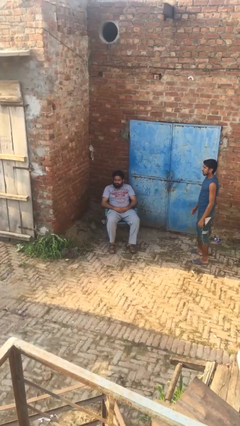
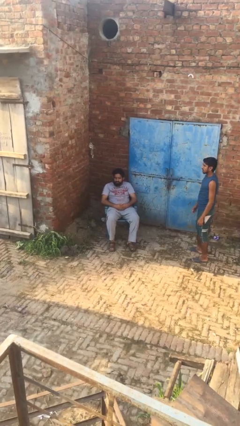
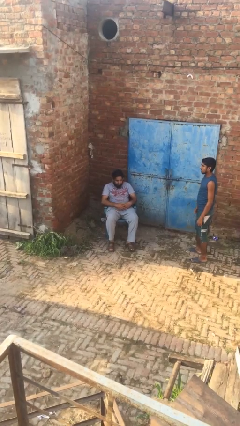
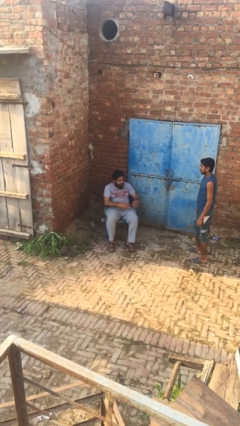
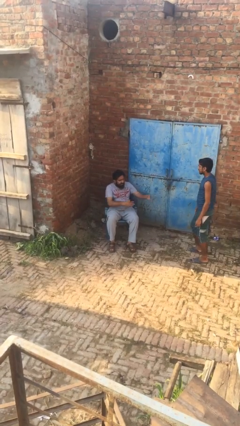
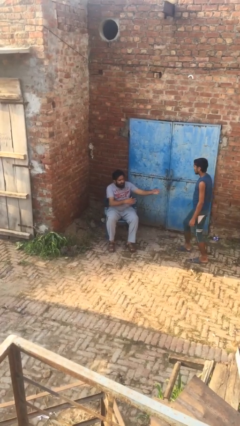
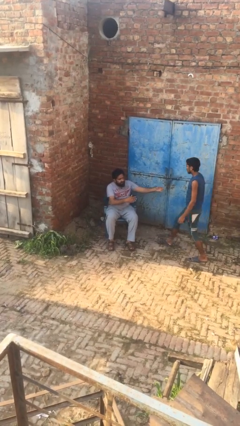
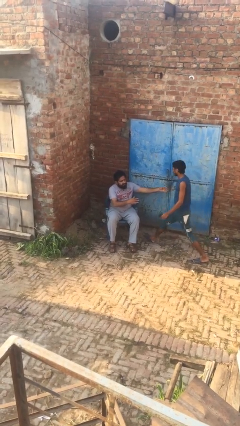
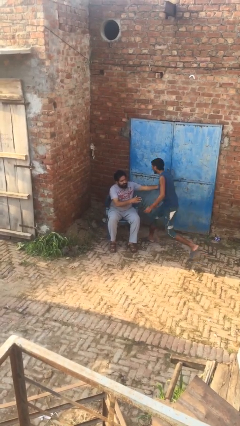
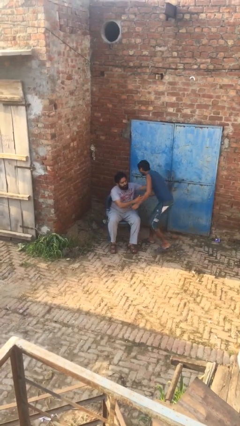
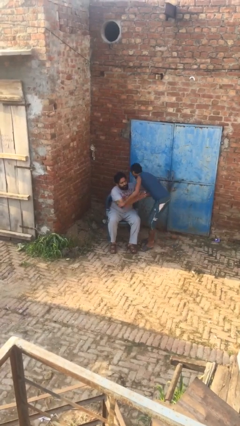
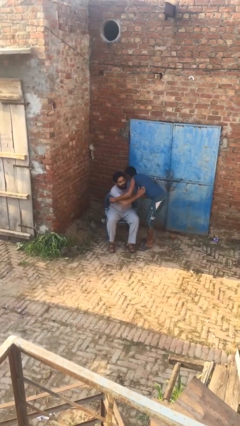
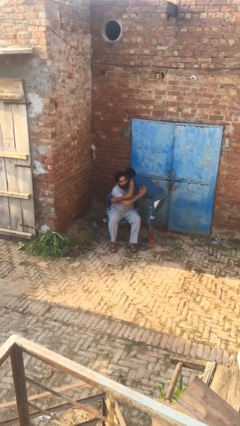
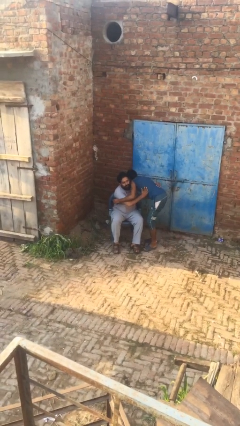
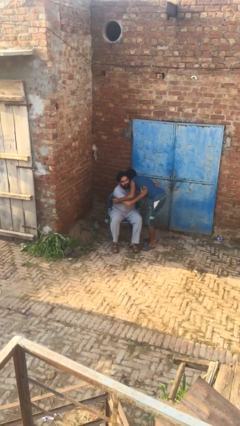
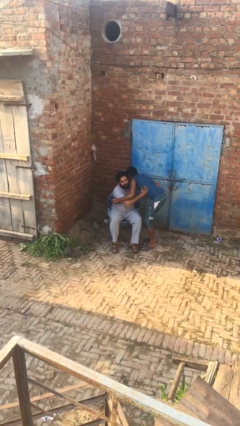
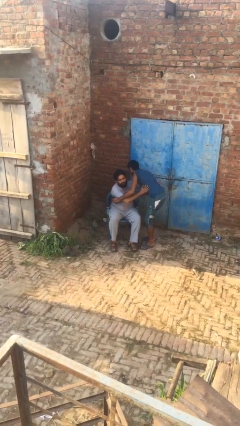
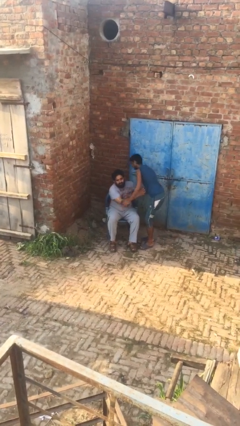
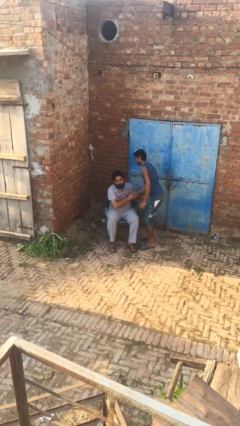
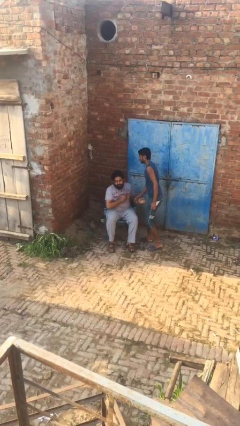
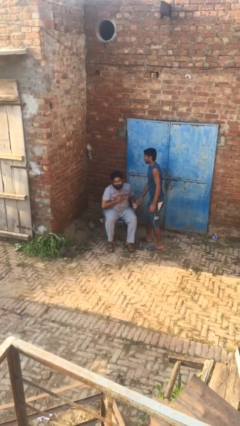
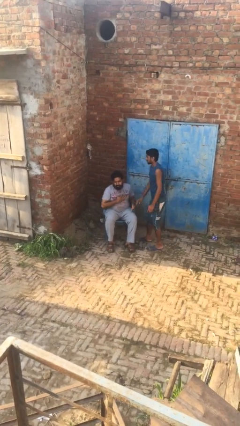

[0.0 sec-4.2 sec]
person embraces person

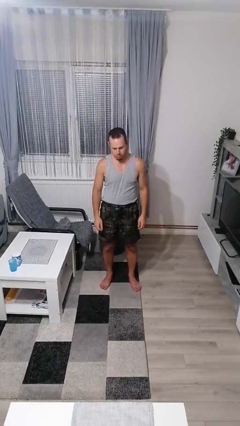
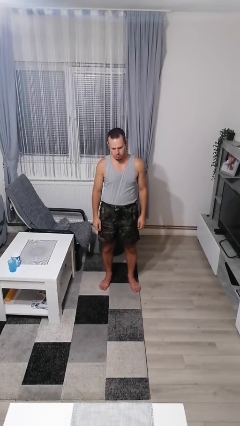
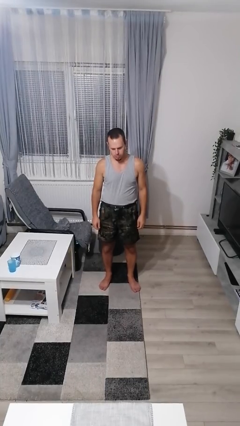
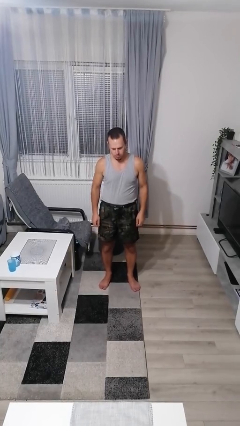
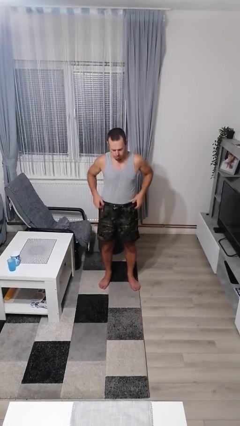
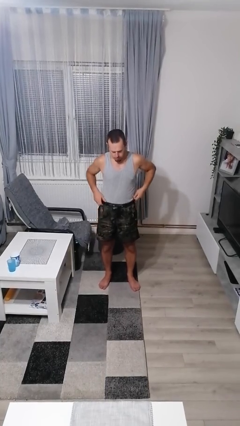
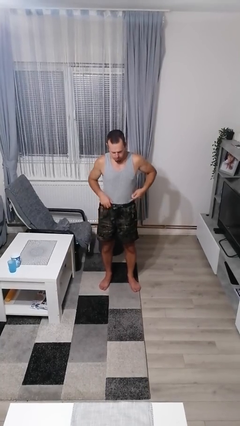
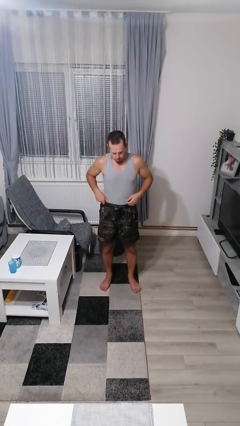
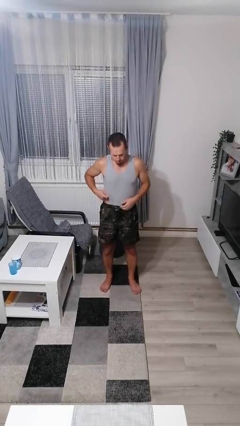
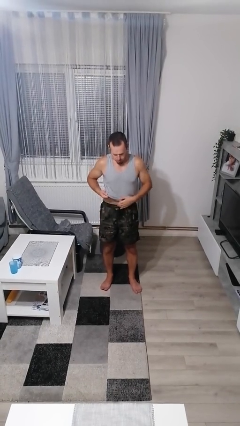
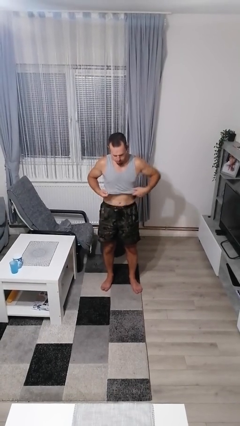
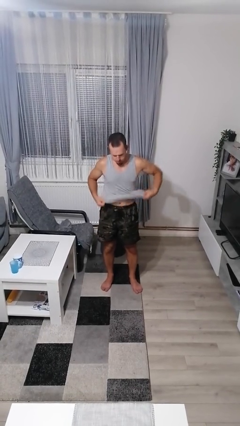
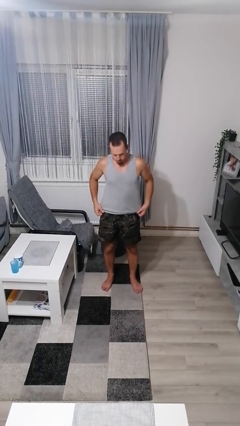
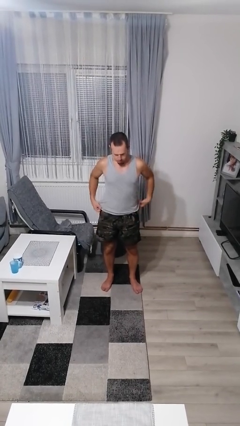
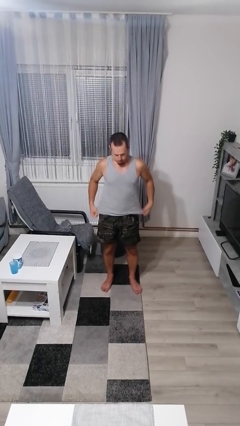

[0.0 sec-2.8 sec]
person untucks shirt

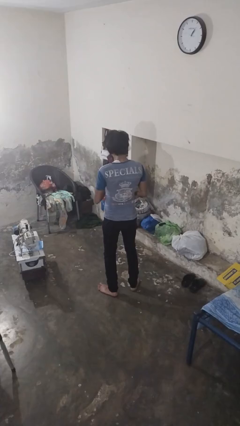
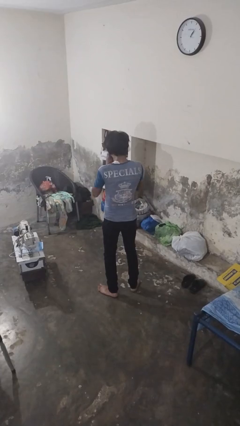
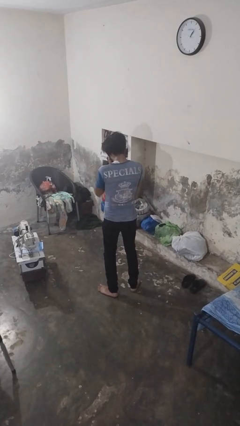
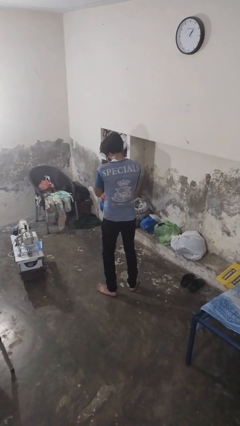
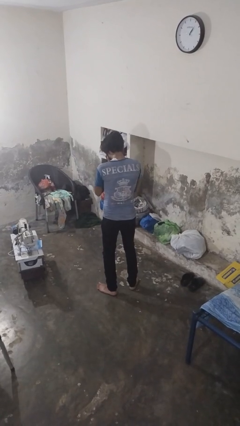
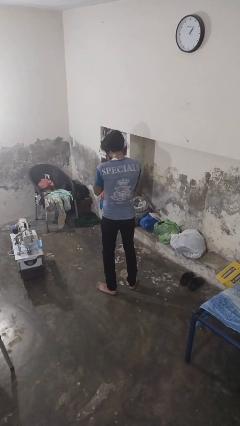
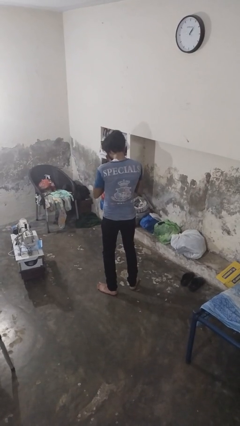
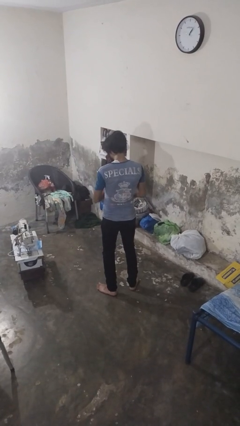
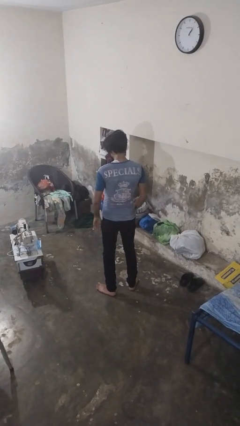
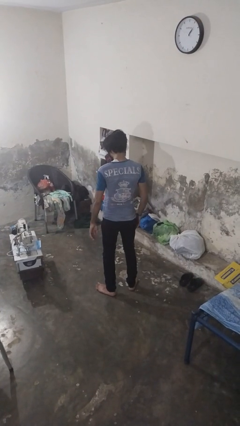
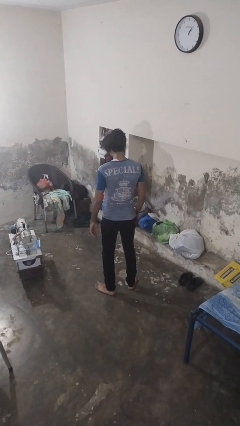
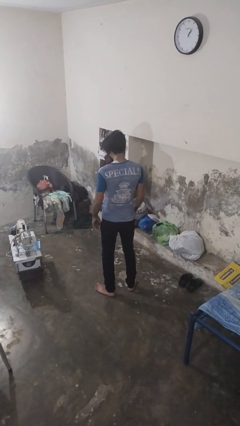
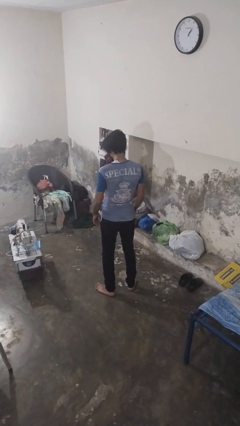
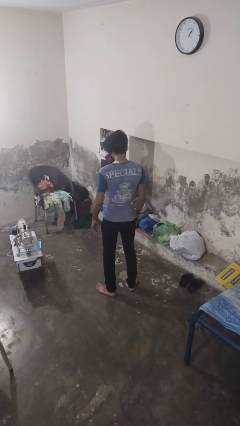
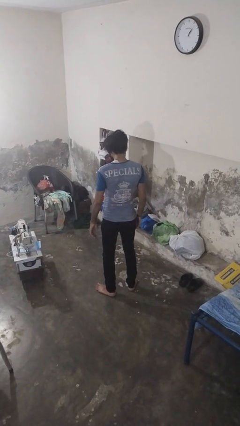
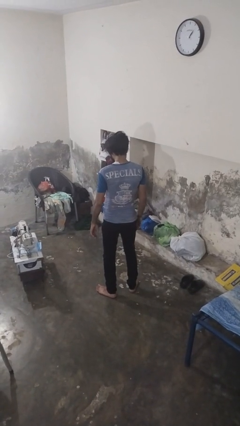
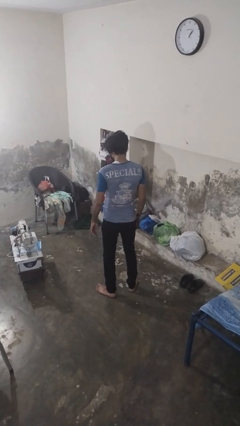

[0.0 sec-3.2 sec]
person sneezes into hand

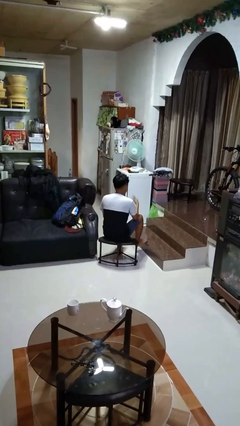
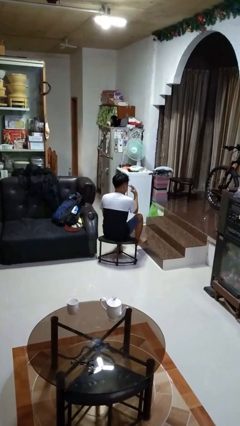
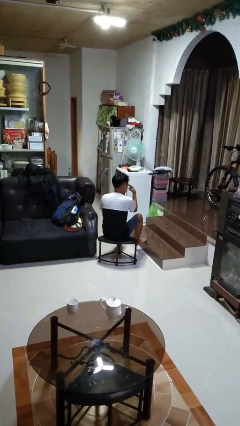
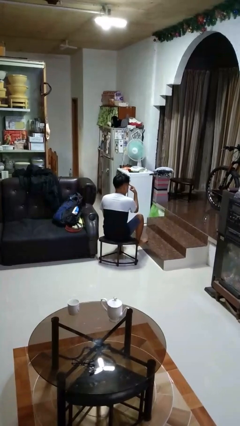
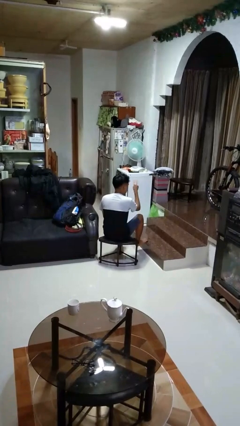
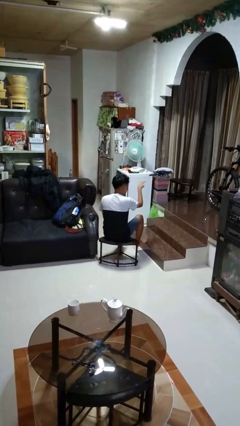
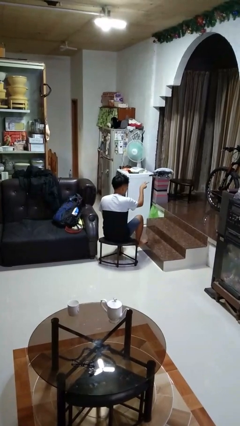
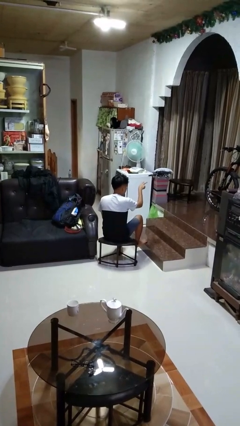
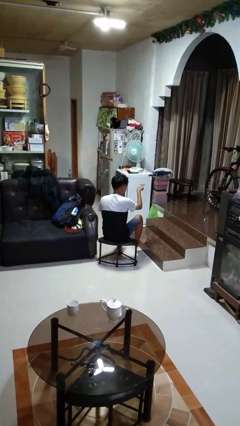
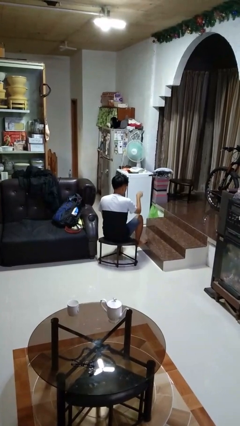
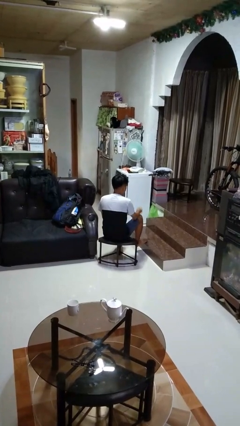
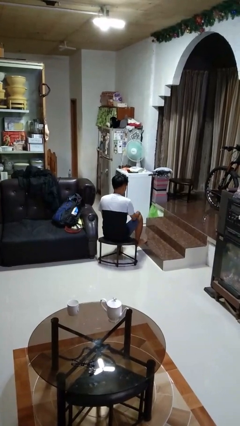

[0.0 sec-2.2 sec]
person gestures watch closely

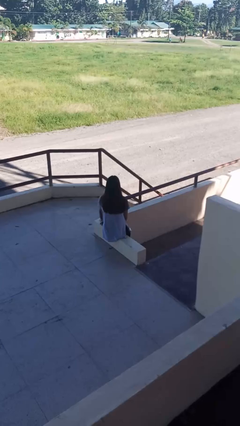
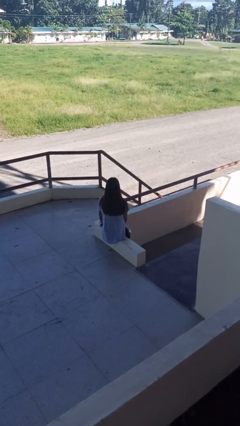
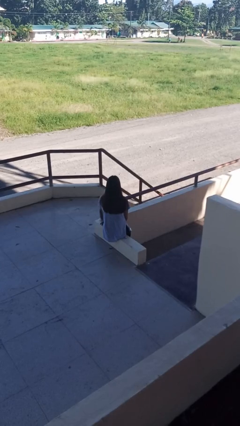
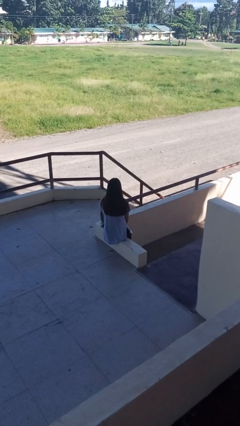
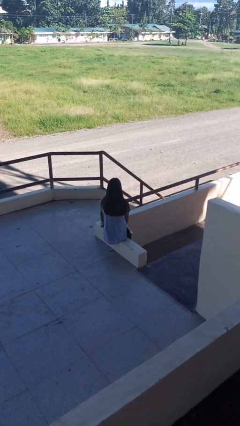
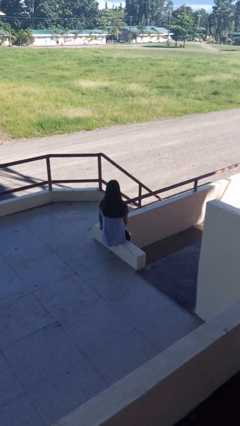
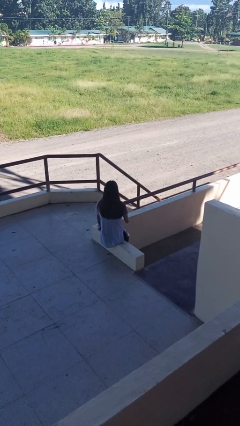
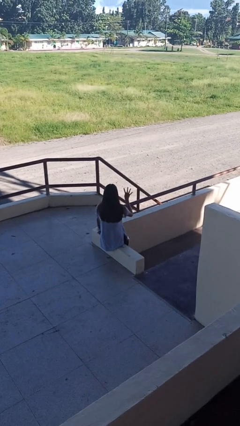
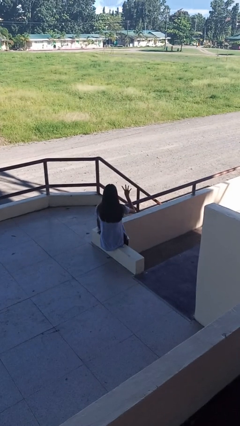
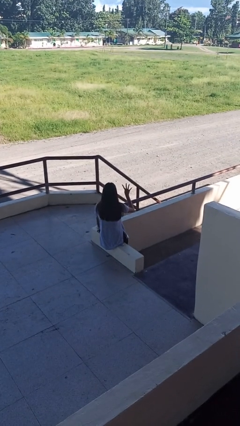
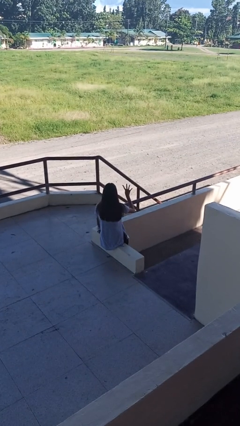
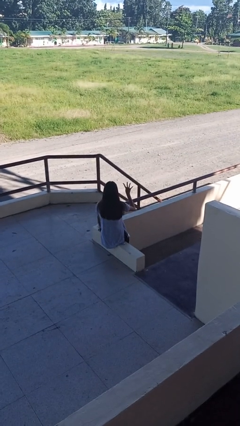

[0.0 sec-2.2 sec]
person gestures number four

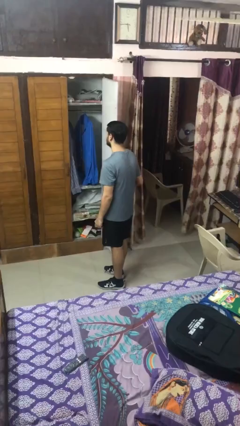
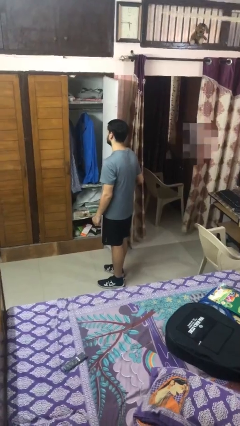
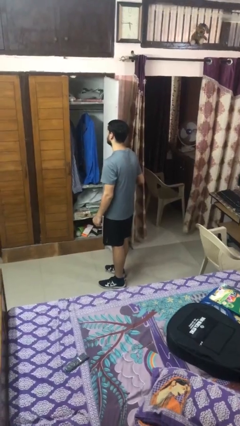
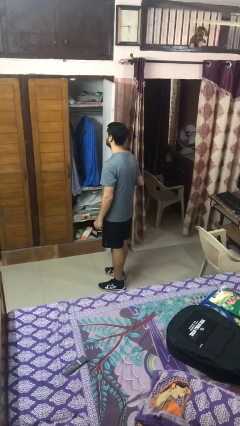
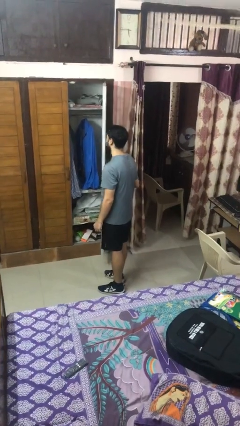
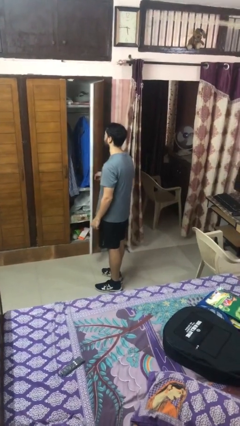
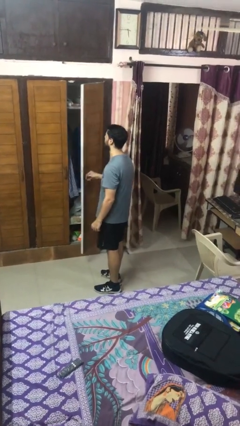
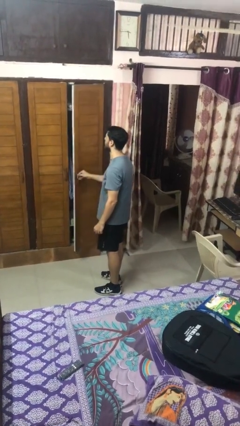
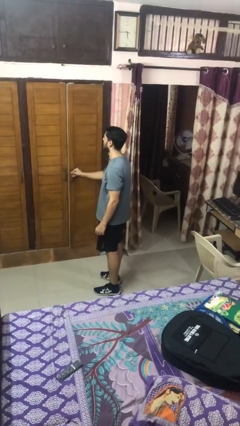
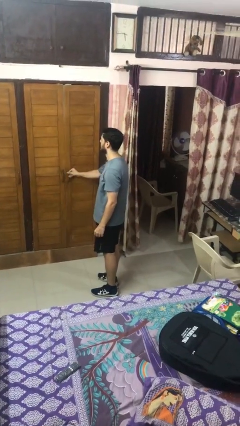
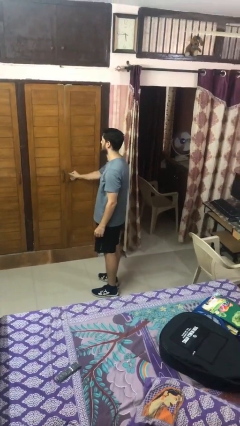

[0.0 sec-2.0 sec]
person closes closet door

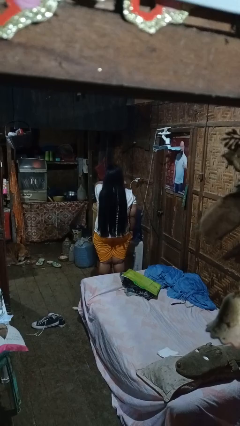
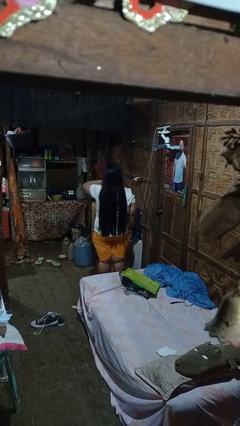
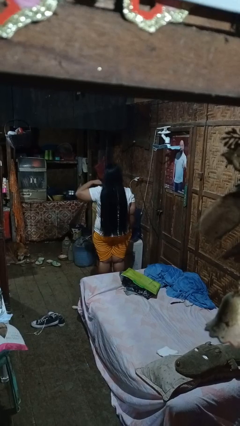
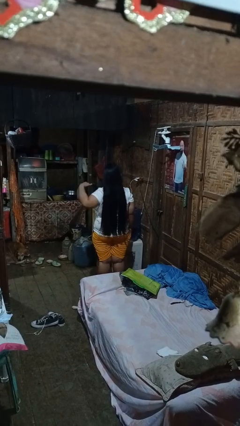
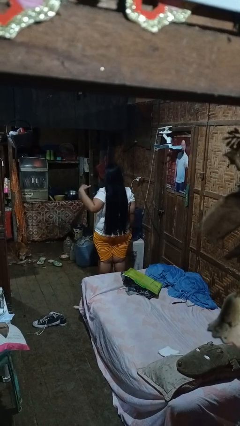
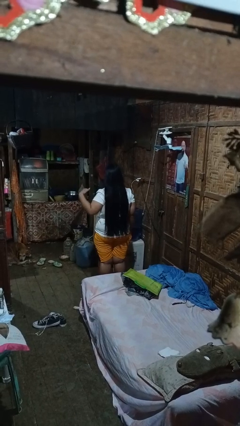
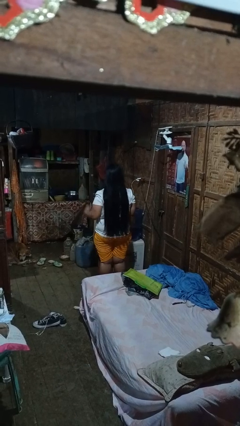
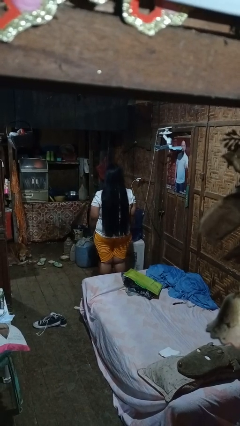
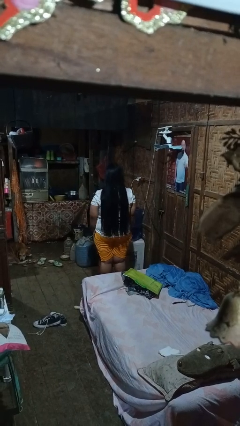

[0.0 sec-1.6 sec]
person gestures cut
